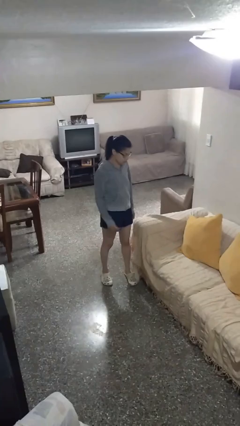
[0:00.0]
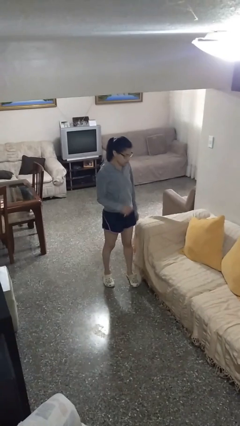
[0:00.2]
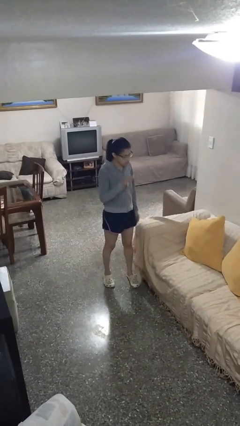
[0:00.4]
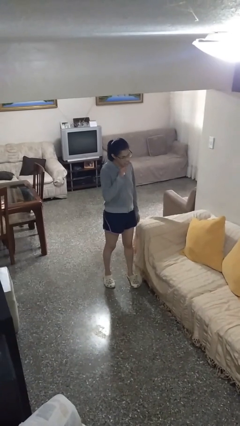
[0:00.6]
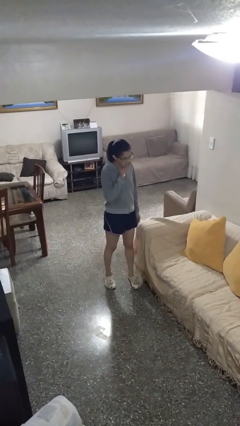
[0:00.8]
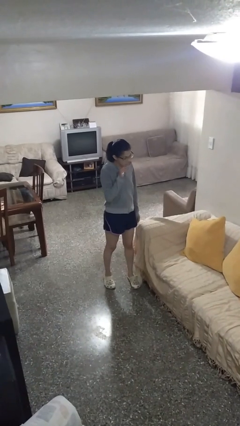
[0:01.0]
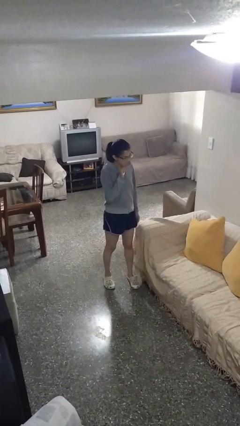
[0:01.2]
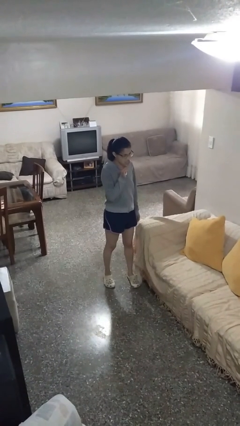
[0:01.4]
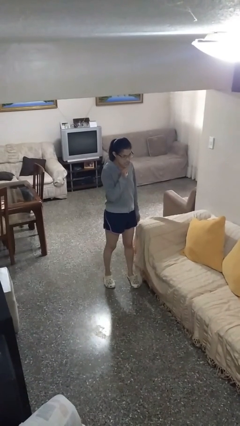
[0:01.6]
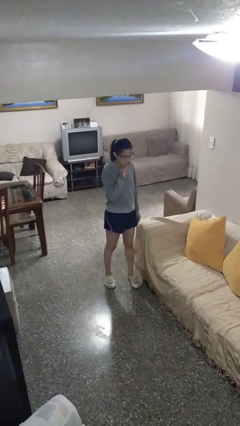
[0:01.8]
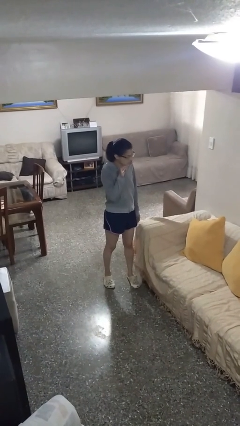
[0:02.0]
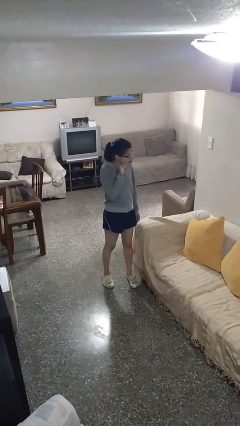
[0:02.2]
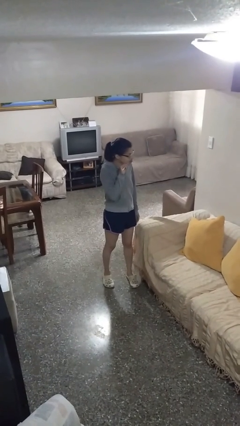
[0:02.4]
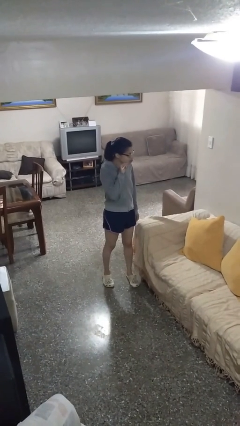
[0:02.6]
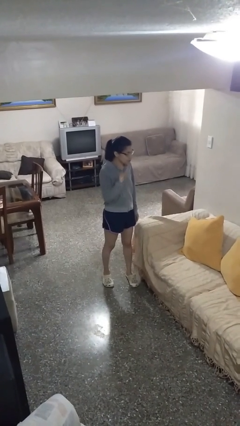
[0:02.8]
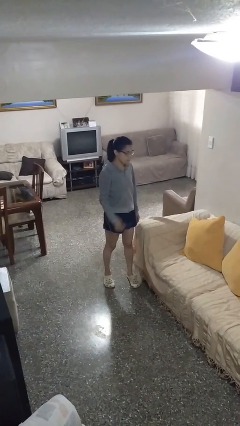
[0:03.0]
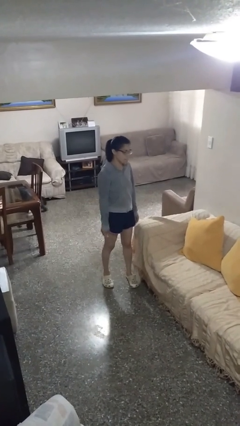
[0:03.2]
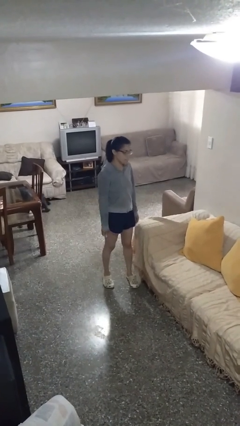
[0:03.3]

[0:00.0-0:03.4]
person brushes teeth

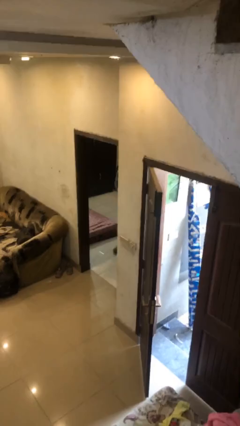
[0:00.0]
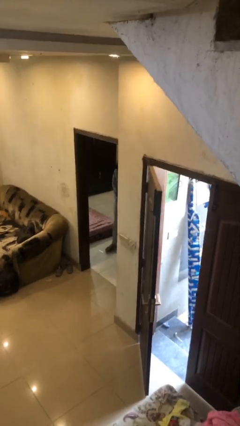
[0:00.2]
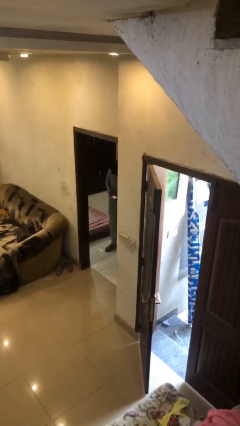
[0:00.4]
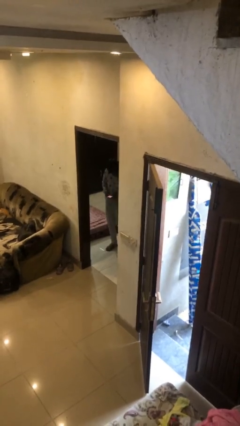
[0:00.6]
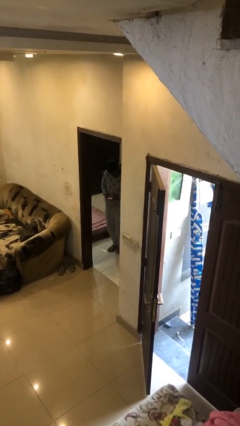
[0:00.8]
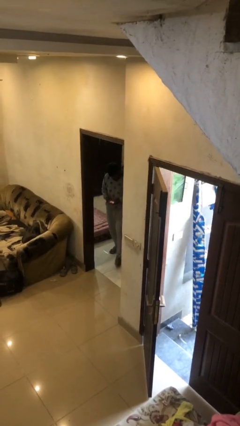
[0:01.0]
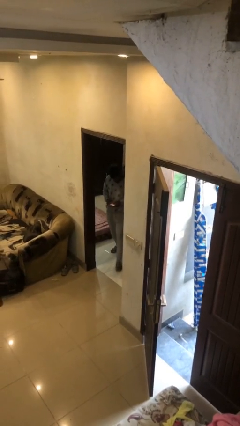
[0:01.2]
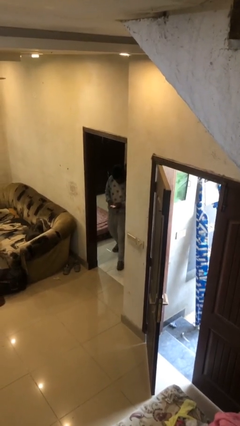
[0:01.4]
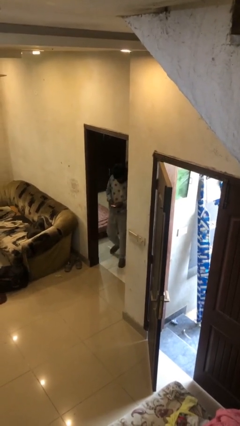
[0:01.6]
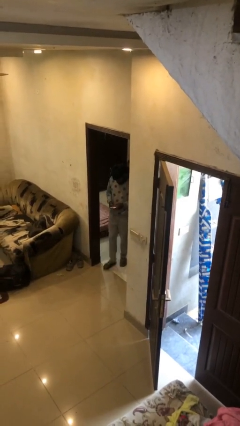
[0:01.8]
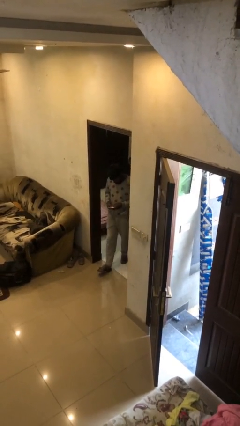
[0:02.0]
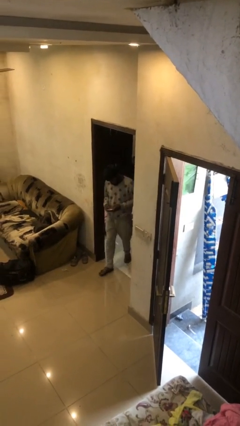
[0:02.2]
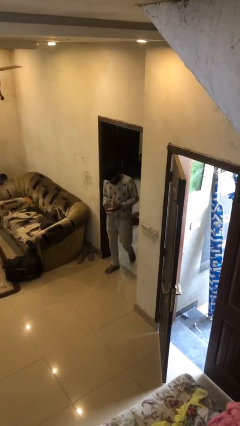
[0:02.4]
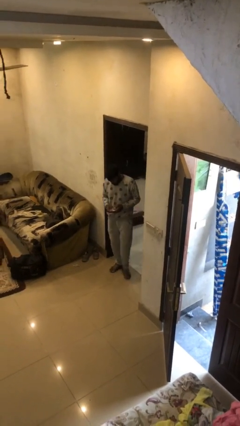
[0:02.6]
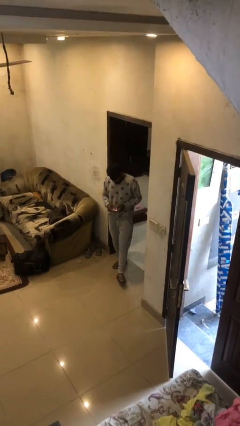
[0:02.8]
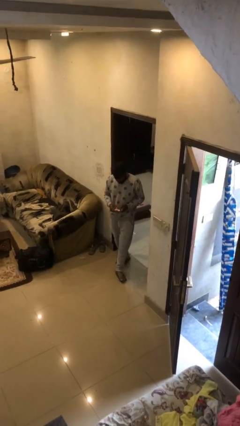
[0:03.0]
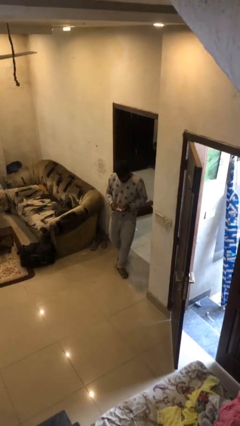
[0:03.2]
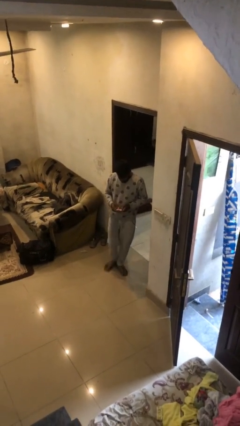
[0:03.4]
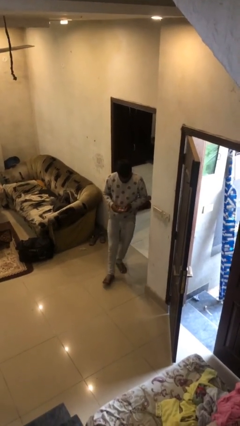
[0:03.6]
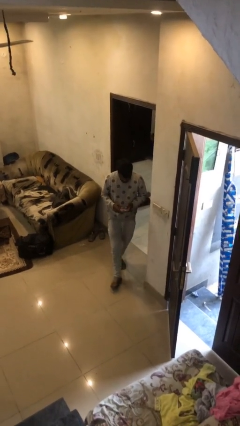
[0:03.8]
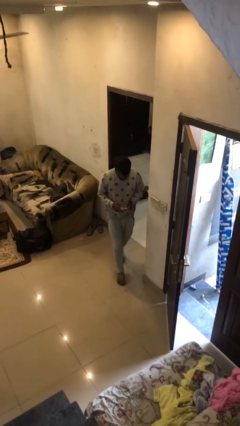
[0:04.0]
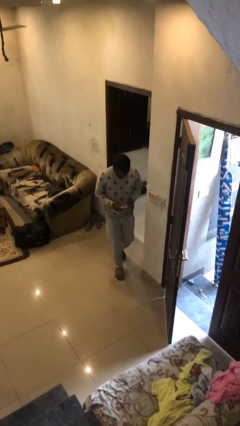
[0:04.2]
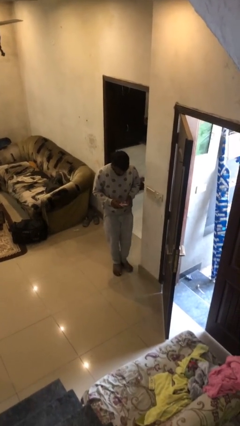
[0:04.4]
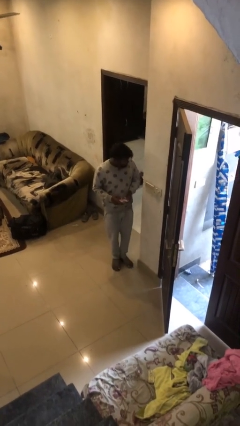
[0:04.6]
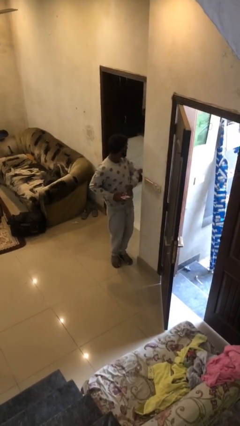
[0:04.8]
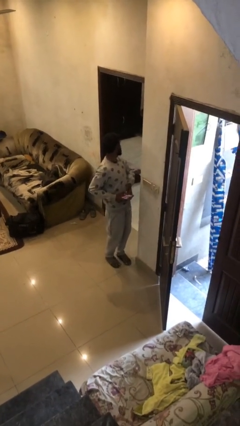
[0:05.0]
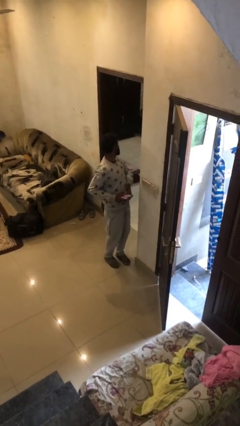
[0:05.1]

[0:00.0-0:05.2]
person enters scene through structure

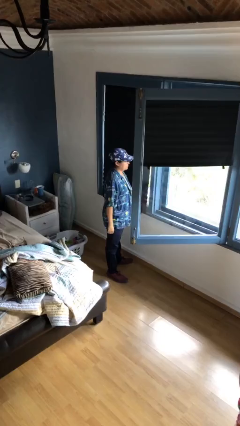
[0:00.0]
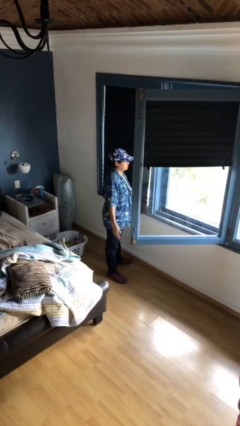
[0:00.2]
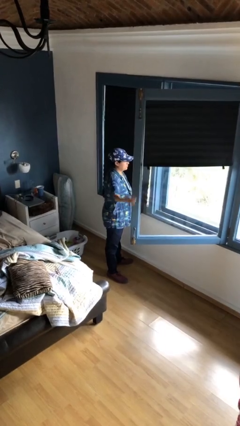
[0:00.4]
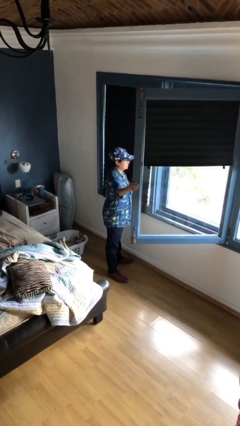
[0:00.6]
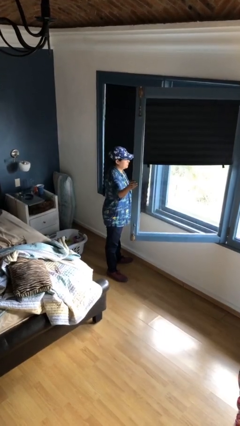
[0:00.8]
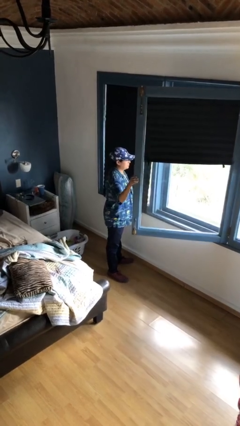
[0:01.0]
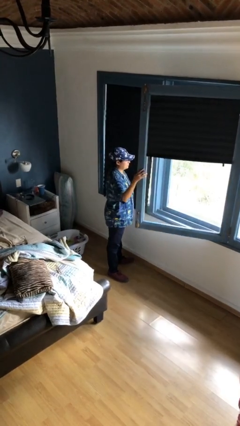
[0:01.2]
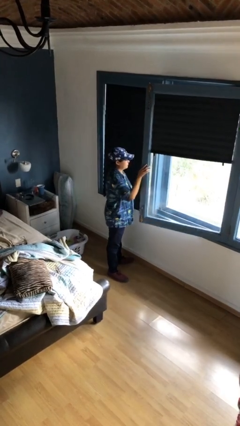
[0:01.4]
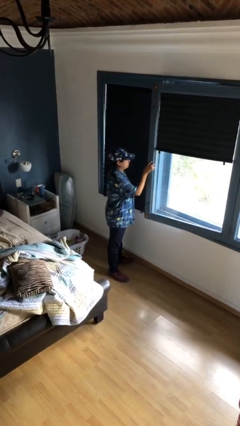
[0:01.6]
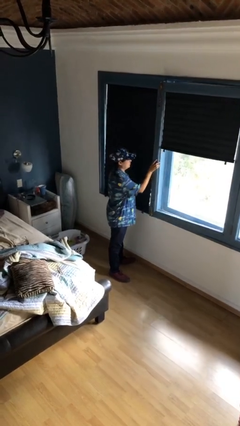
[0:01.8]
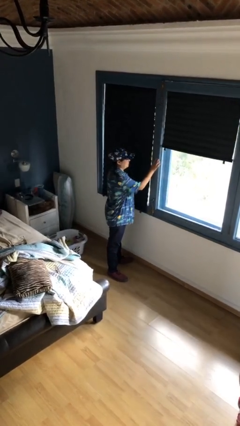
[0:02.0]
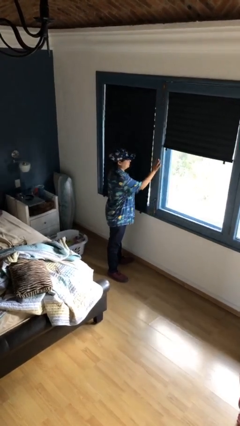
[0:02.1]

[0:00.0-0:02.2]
person closes home window

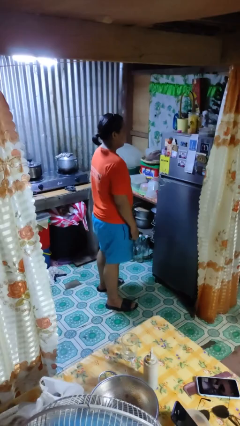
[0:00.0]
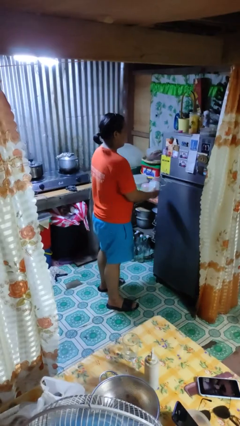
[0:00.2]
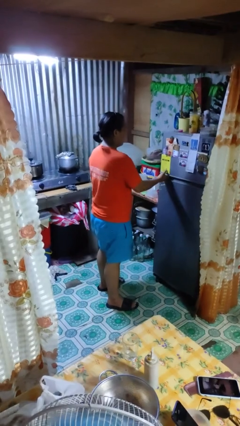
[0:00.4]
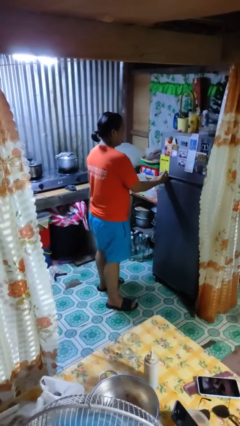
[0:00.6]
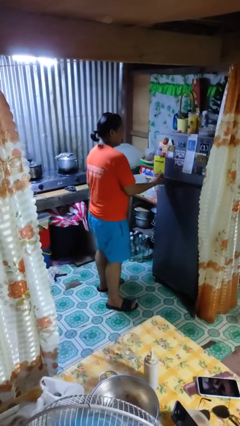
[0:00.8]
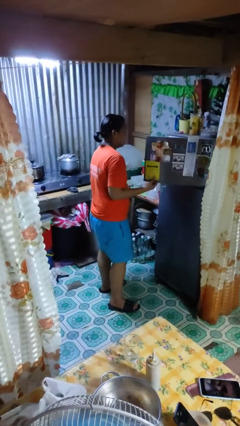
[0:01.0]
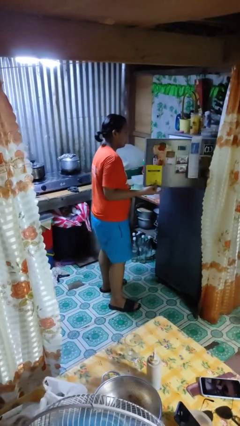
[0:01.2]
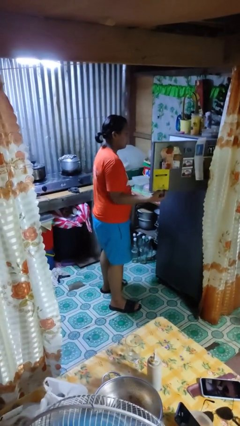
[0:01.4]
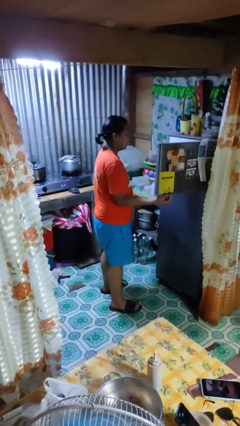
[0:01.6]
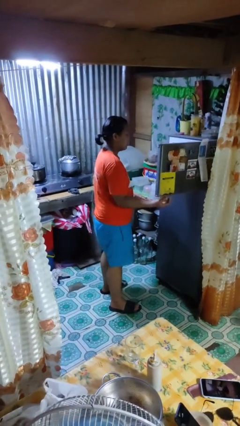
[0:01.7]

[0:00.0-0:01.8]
person opens refrigerator

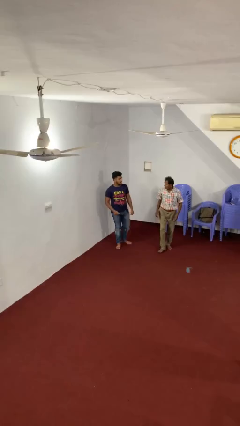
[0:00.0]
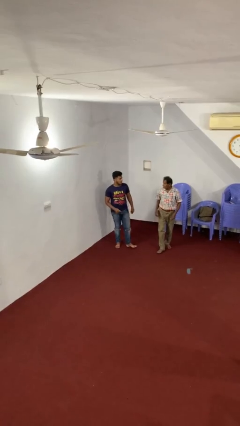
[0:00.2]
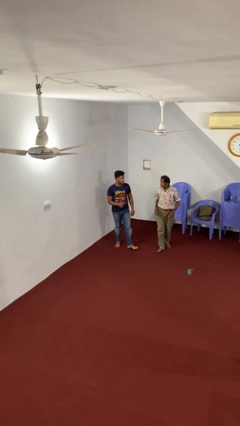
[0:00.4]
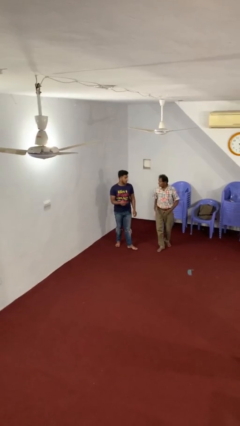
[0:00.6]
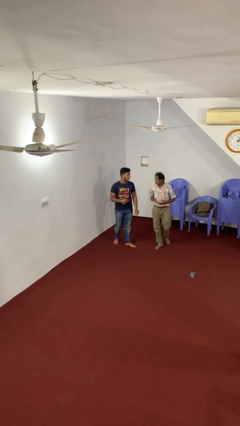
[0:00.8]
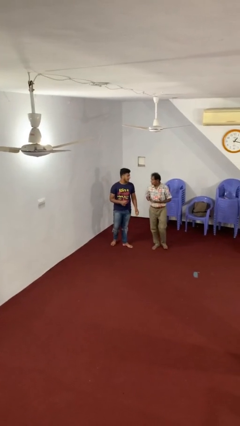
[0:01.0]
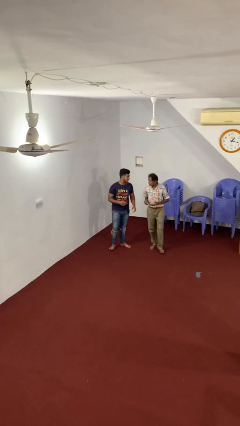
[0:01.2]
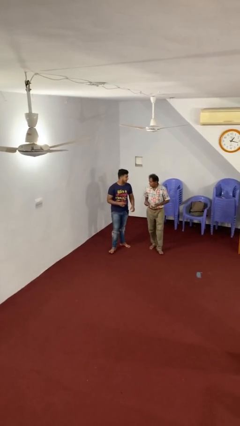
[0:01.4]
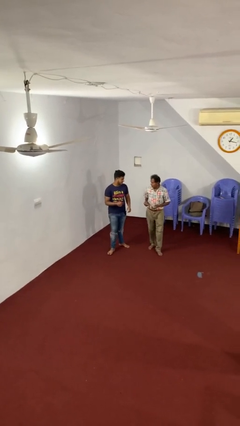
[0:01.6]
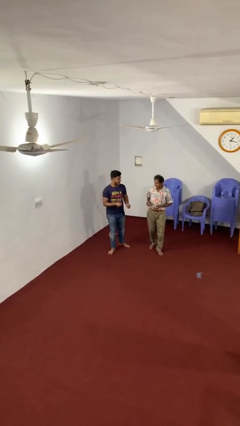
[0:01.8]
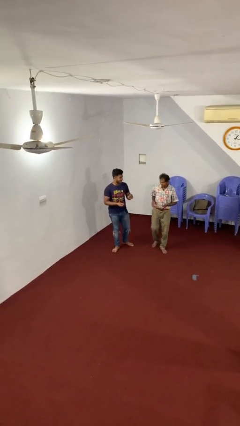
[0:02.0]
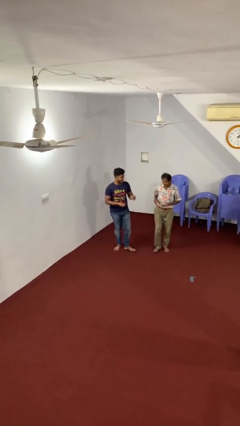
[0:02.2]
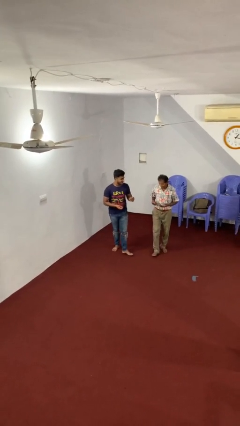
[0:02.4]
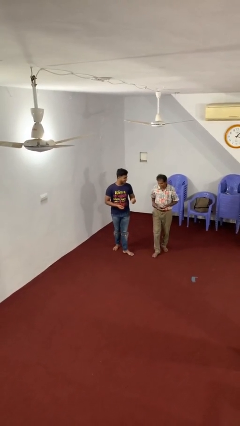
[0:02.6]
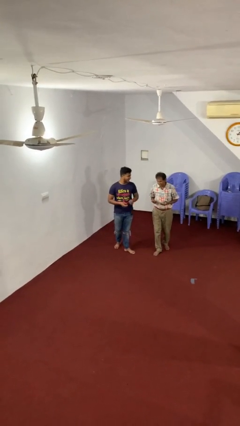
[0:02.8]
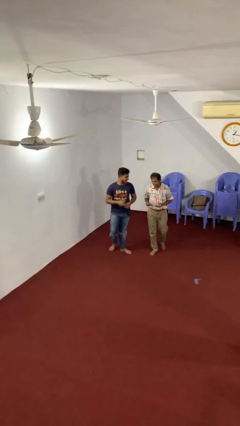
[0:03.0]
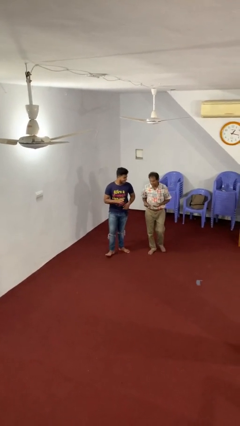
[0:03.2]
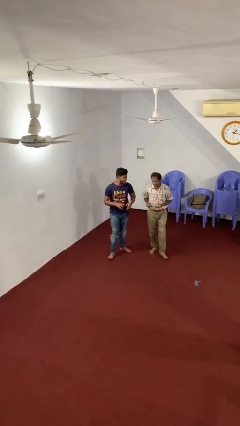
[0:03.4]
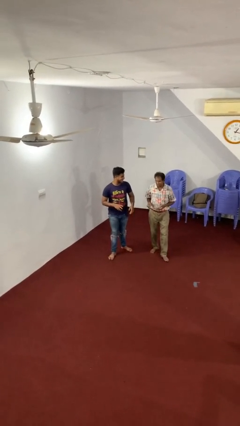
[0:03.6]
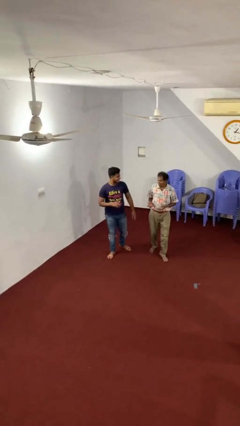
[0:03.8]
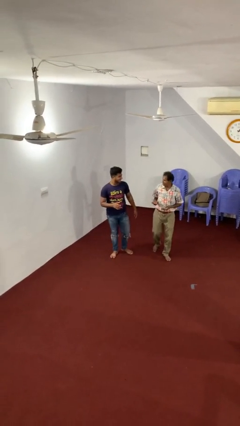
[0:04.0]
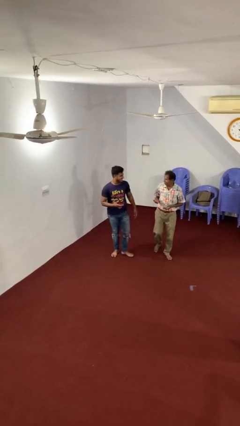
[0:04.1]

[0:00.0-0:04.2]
person talks to person

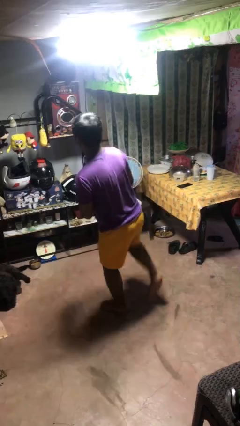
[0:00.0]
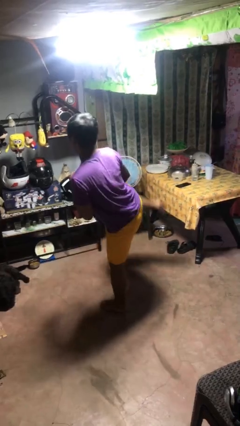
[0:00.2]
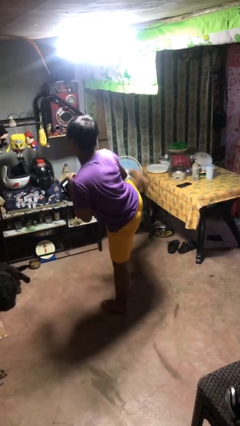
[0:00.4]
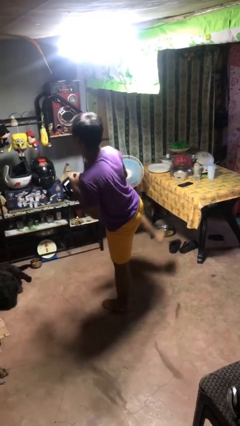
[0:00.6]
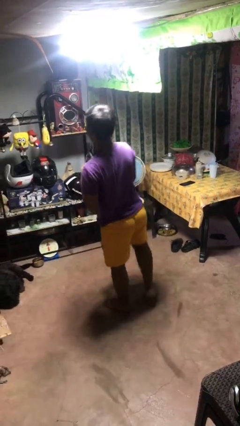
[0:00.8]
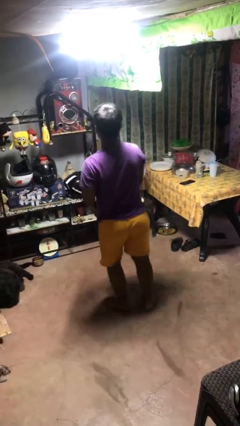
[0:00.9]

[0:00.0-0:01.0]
person karate kicks
